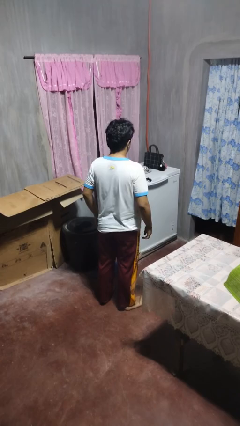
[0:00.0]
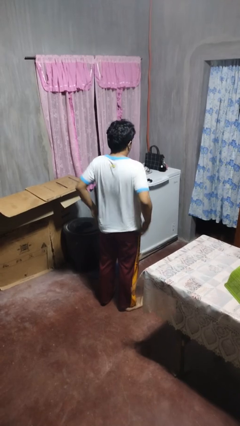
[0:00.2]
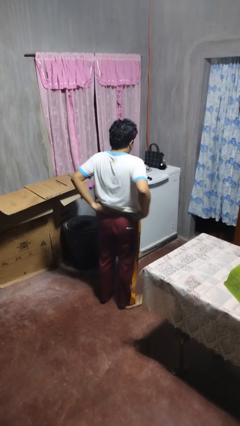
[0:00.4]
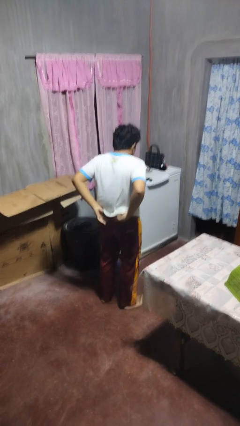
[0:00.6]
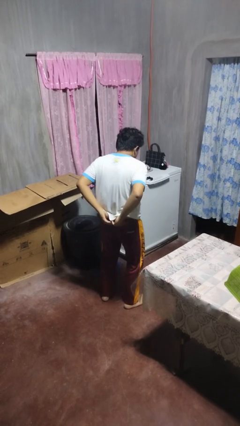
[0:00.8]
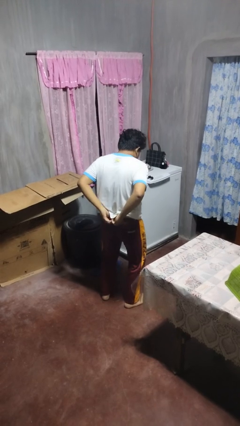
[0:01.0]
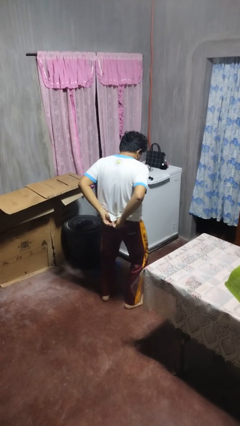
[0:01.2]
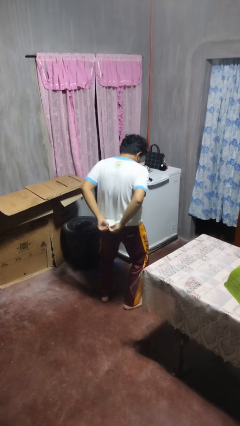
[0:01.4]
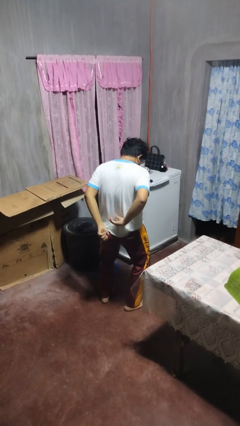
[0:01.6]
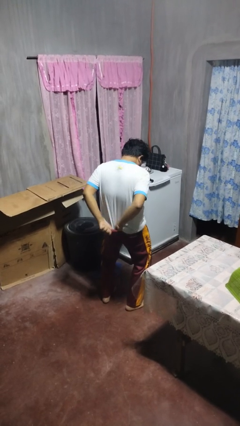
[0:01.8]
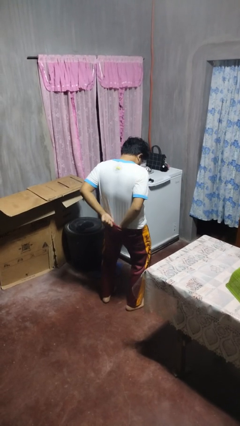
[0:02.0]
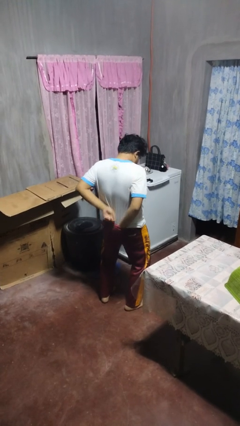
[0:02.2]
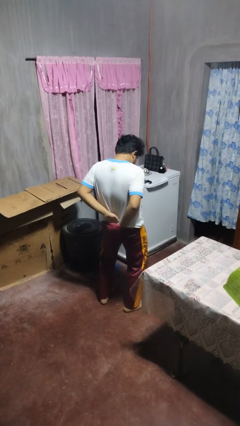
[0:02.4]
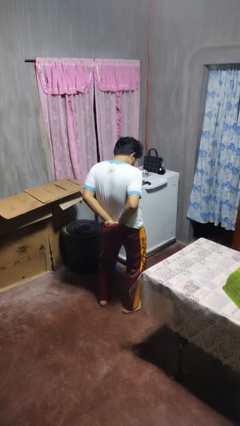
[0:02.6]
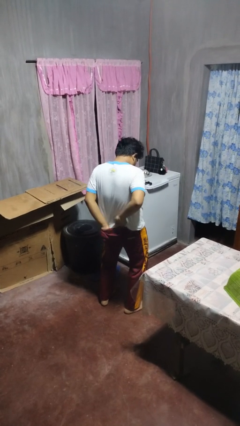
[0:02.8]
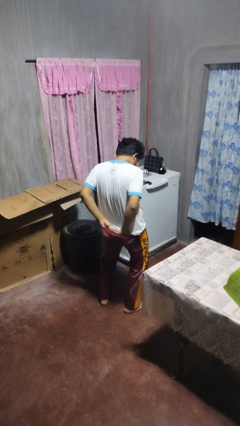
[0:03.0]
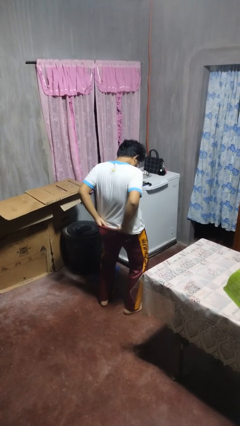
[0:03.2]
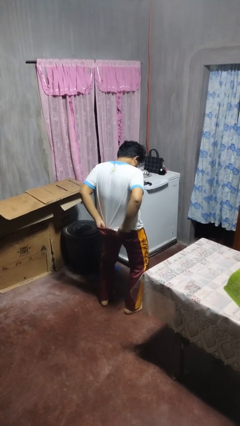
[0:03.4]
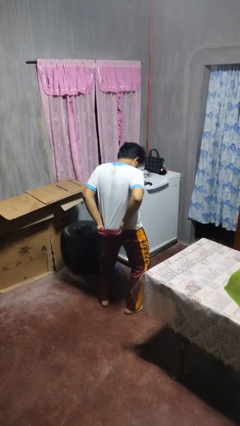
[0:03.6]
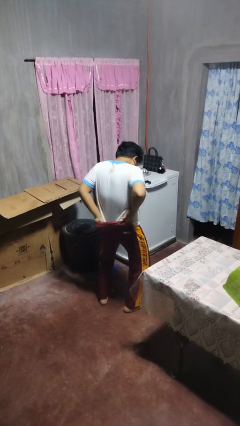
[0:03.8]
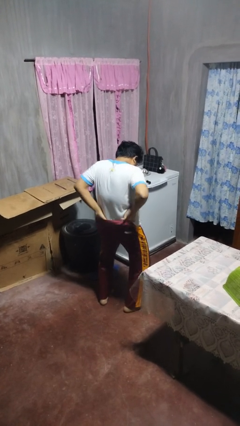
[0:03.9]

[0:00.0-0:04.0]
person tucks in shirt

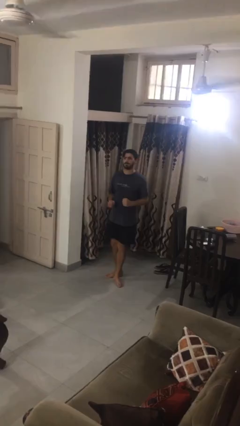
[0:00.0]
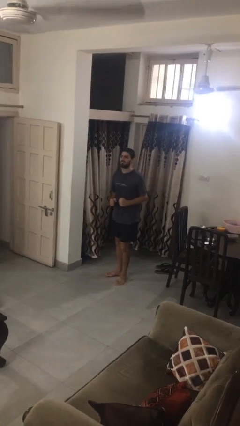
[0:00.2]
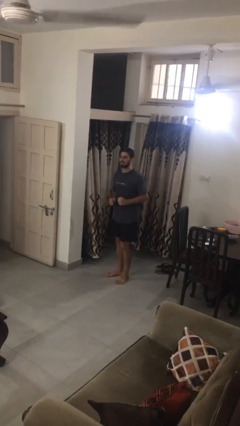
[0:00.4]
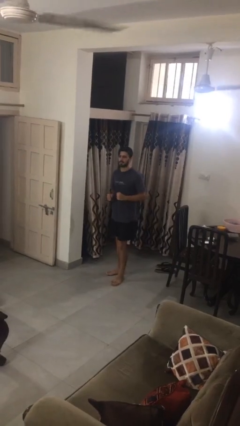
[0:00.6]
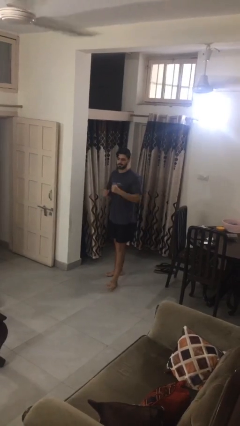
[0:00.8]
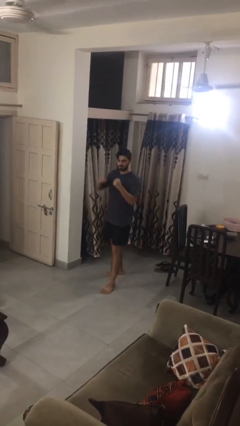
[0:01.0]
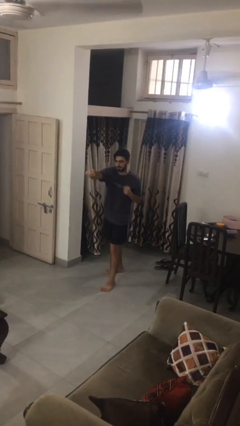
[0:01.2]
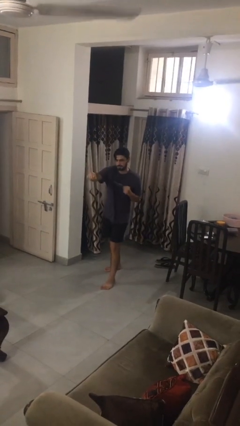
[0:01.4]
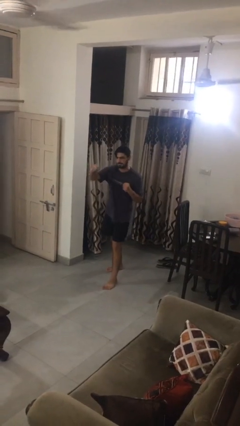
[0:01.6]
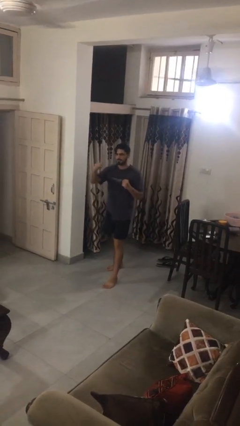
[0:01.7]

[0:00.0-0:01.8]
person karate chop

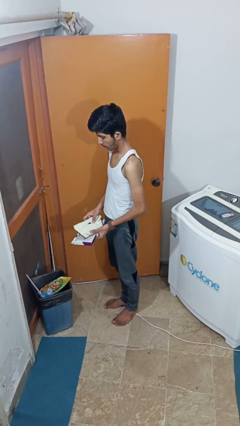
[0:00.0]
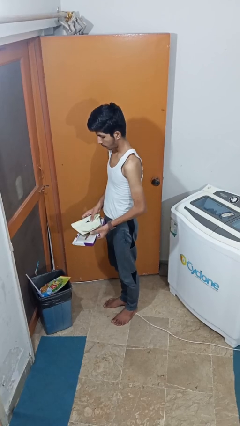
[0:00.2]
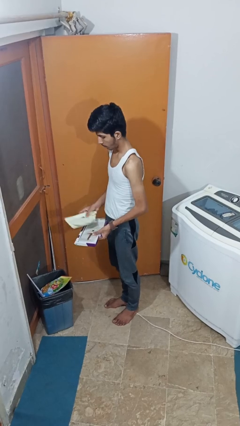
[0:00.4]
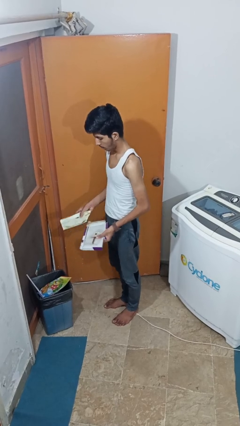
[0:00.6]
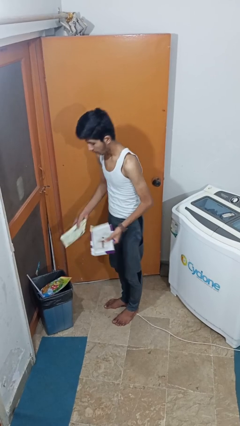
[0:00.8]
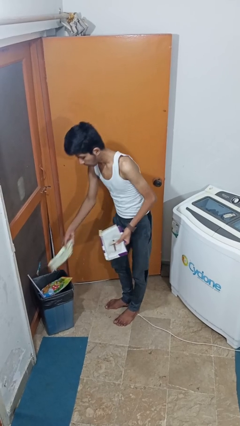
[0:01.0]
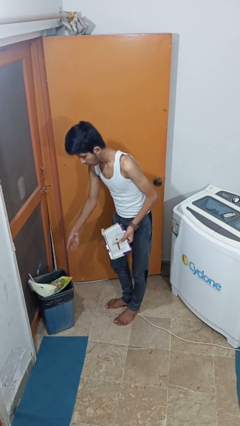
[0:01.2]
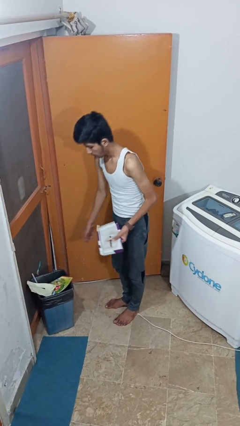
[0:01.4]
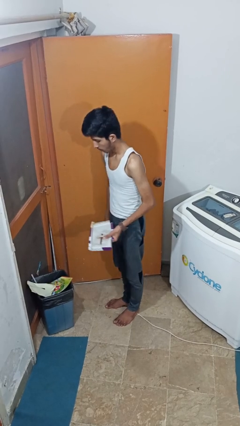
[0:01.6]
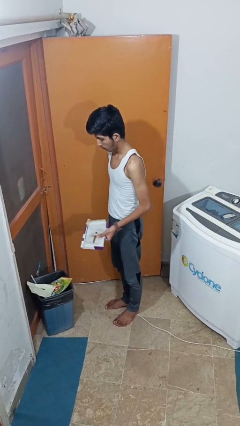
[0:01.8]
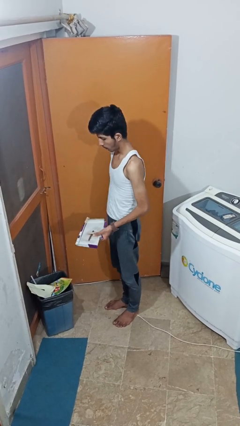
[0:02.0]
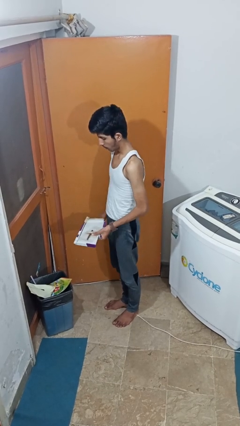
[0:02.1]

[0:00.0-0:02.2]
person discards trash

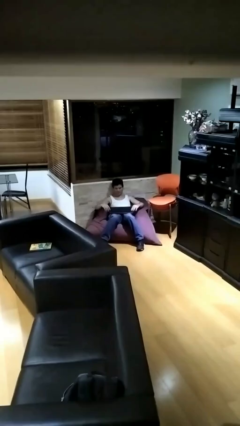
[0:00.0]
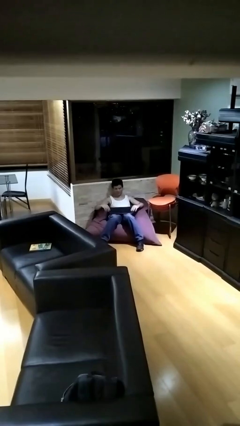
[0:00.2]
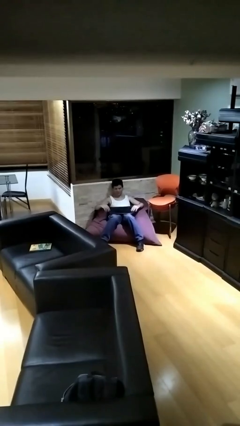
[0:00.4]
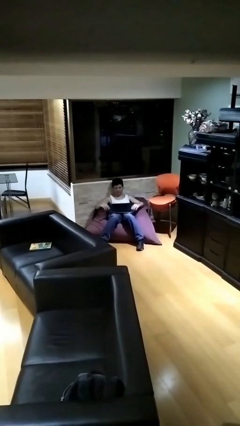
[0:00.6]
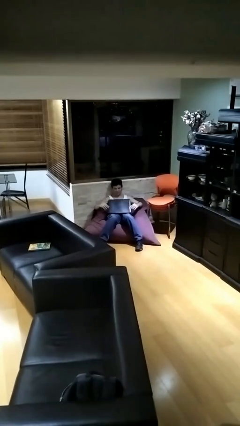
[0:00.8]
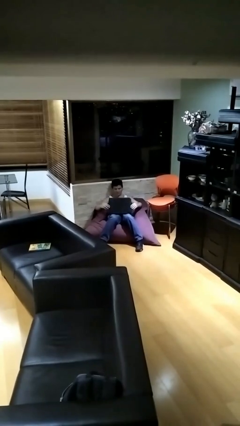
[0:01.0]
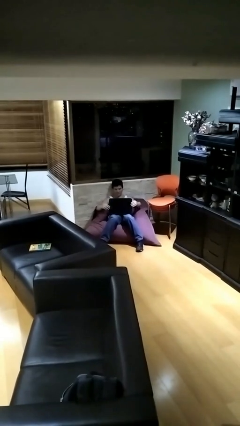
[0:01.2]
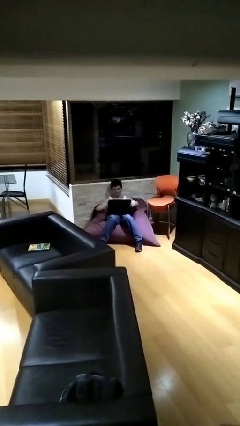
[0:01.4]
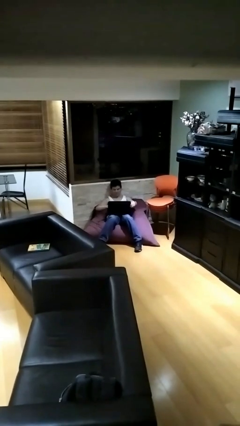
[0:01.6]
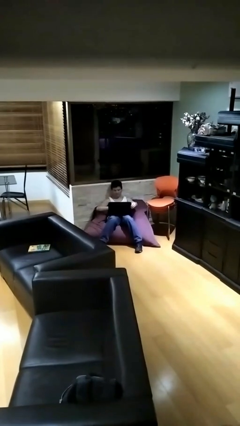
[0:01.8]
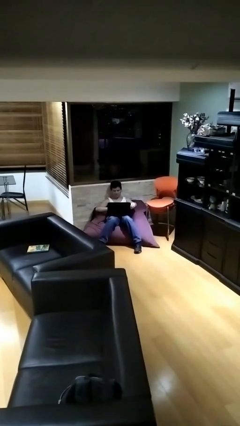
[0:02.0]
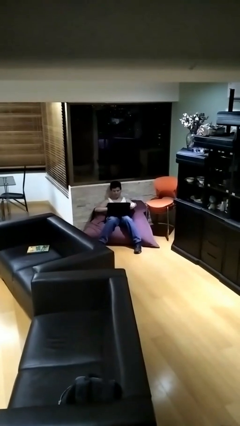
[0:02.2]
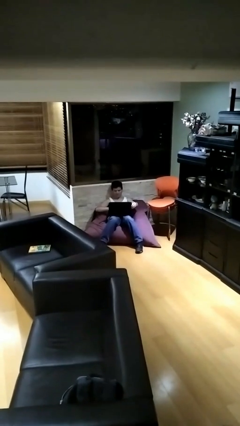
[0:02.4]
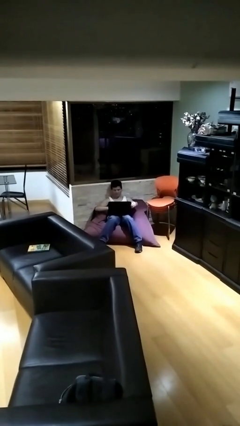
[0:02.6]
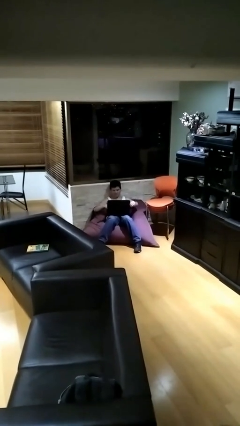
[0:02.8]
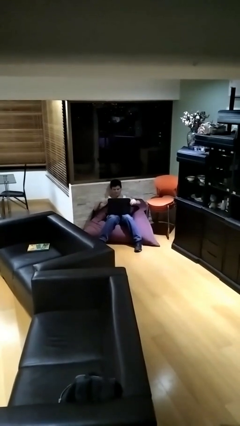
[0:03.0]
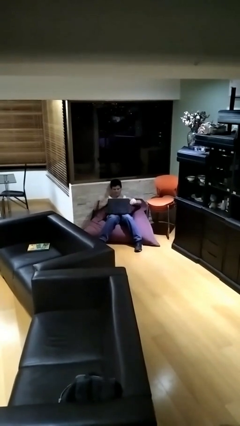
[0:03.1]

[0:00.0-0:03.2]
person interacts with laptop

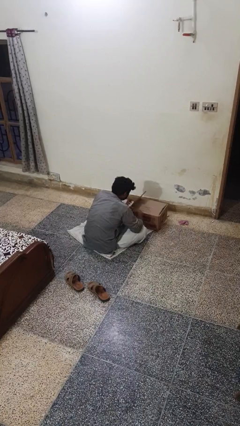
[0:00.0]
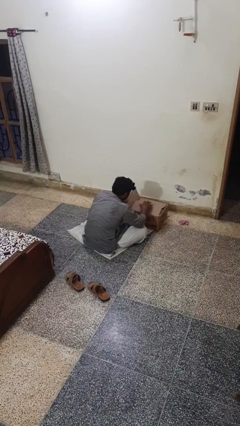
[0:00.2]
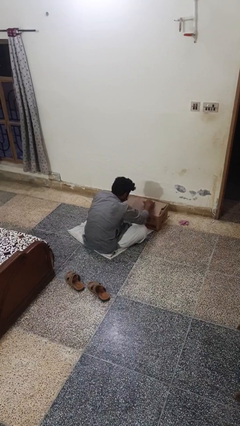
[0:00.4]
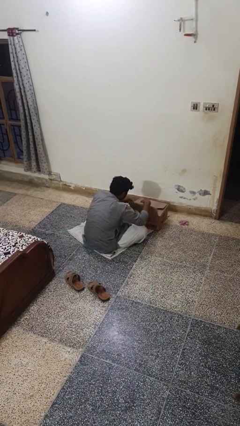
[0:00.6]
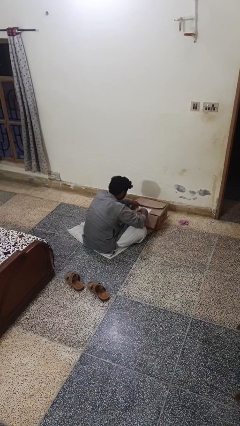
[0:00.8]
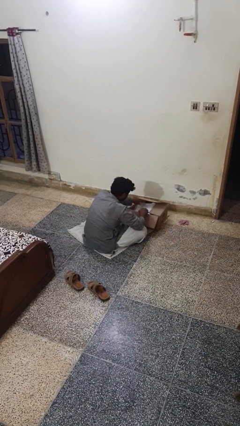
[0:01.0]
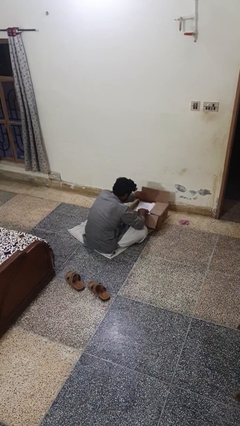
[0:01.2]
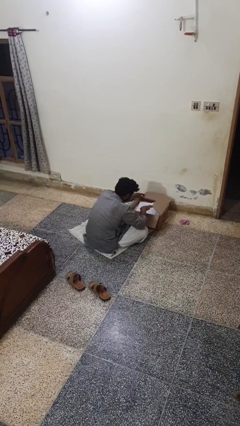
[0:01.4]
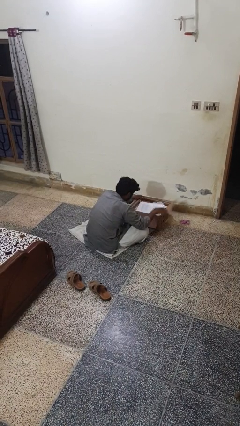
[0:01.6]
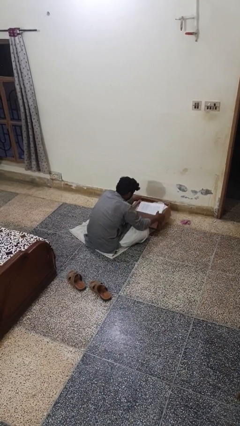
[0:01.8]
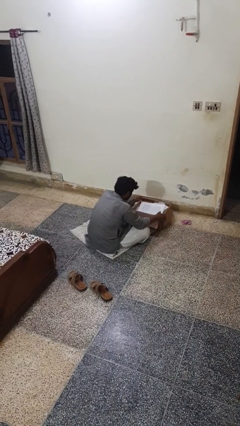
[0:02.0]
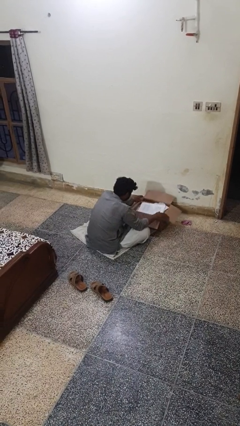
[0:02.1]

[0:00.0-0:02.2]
person opens box

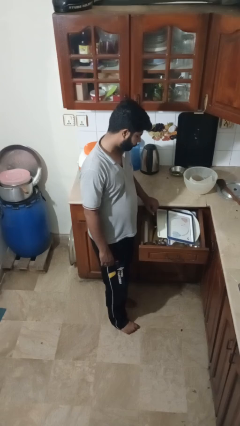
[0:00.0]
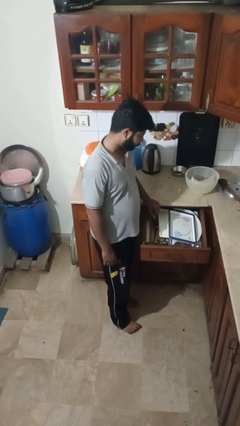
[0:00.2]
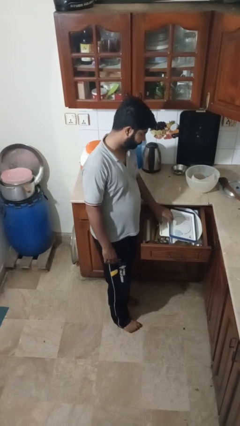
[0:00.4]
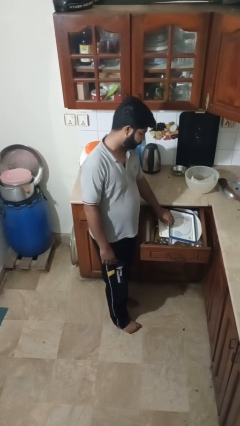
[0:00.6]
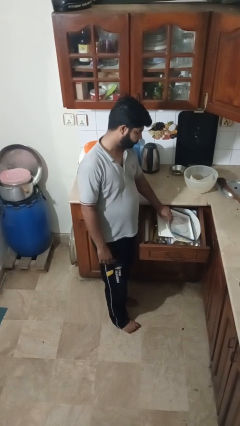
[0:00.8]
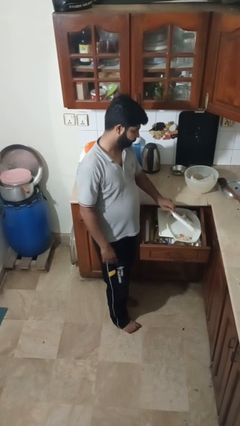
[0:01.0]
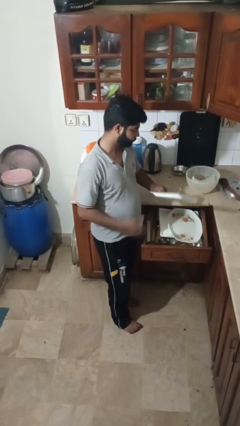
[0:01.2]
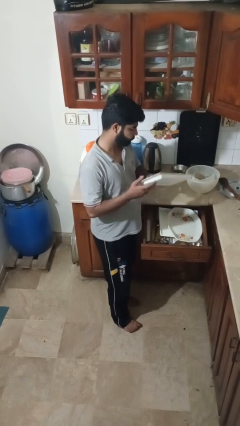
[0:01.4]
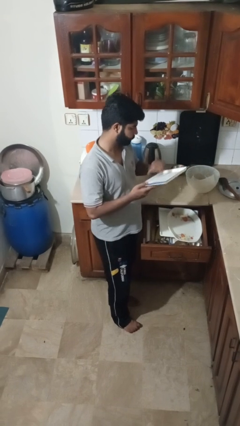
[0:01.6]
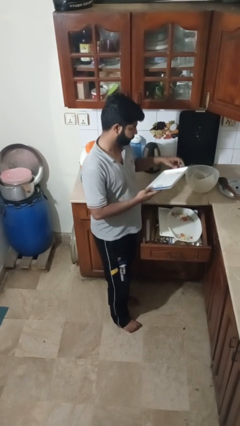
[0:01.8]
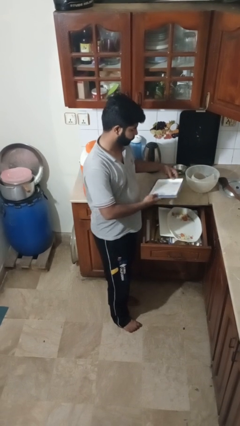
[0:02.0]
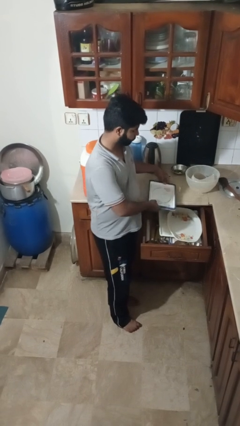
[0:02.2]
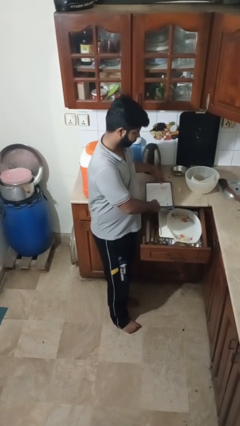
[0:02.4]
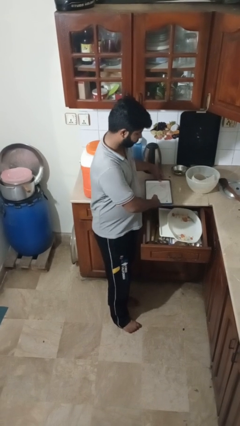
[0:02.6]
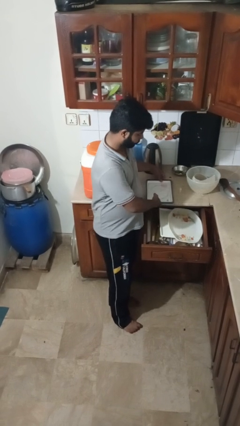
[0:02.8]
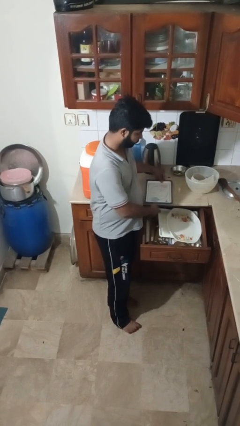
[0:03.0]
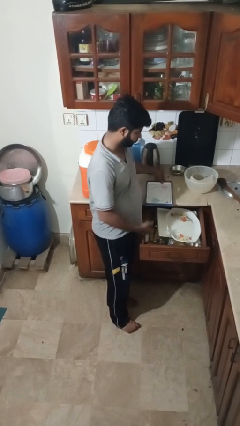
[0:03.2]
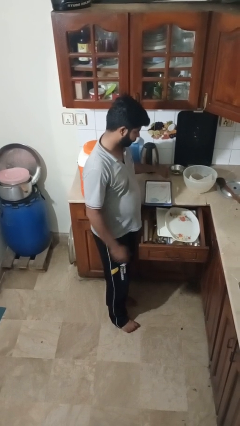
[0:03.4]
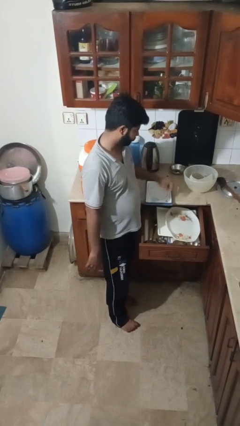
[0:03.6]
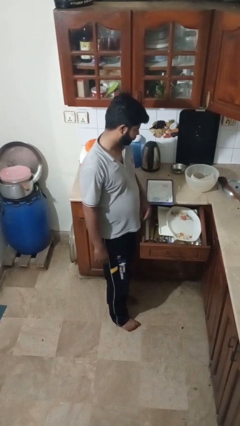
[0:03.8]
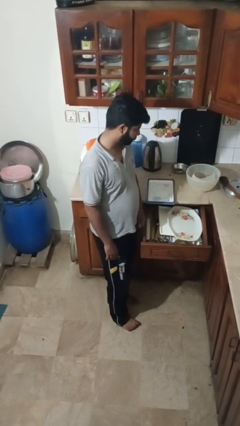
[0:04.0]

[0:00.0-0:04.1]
person takes object from kitchen drawer
